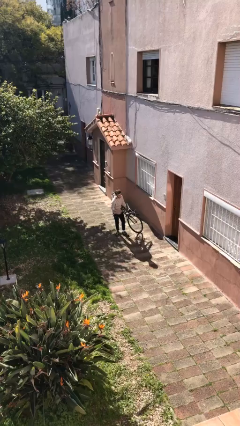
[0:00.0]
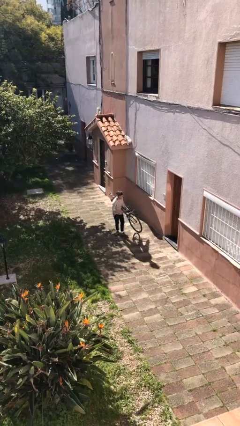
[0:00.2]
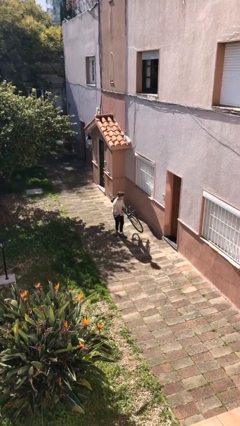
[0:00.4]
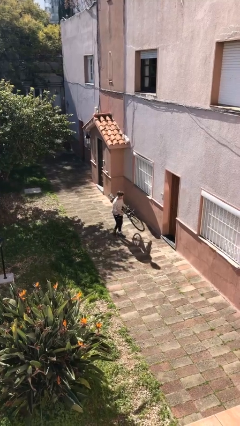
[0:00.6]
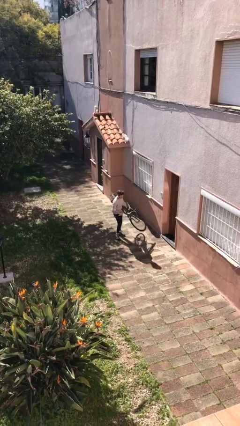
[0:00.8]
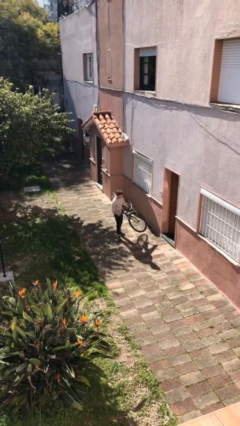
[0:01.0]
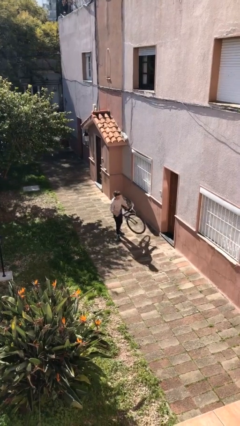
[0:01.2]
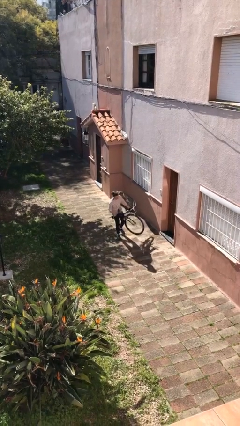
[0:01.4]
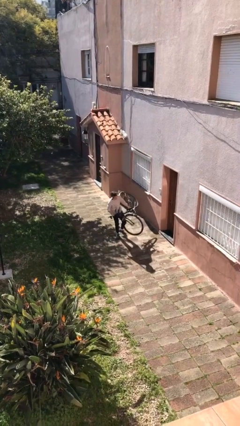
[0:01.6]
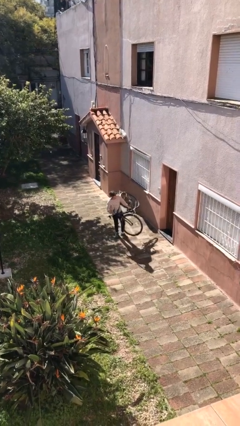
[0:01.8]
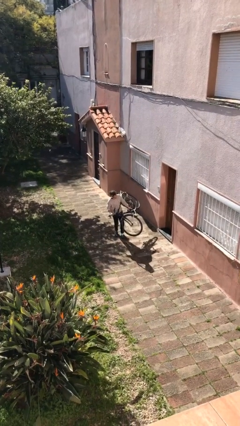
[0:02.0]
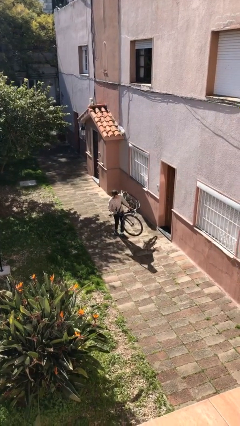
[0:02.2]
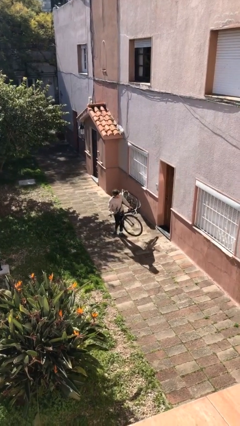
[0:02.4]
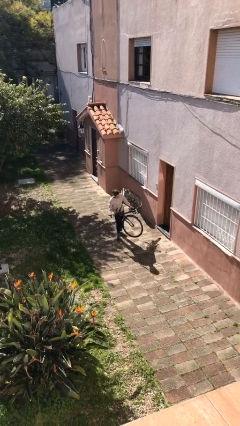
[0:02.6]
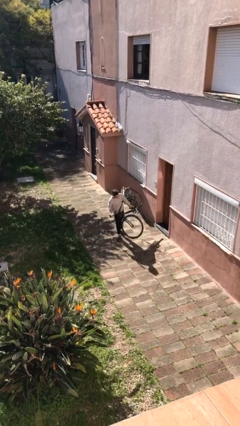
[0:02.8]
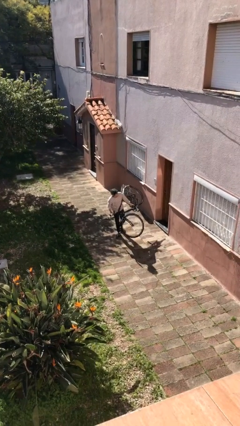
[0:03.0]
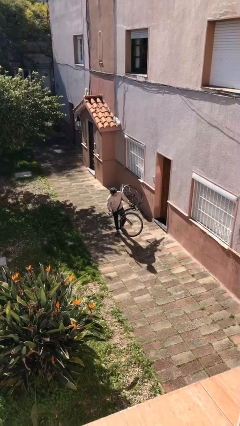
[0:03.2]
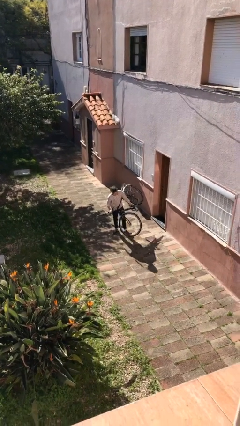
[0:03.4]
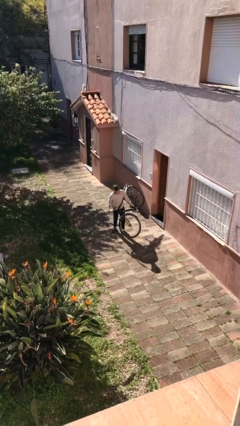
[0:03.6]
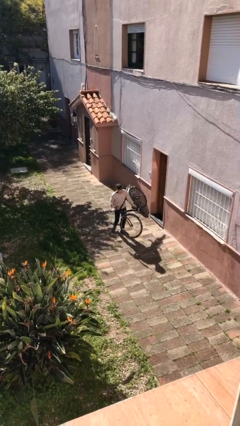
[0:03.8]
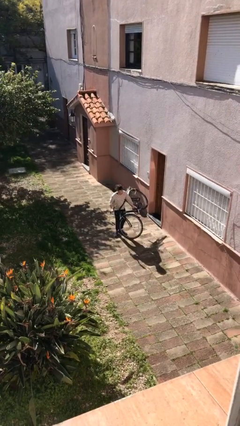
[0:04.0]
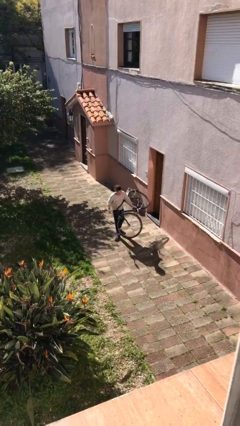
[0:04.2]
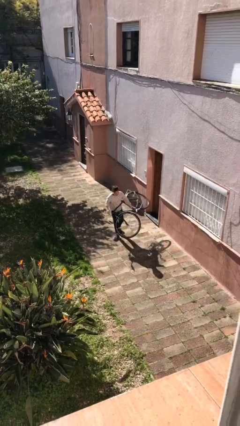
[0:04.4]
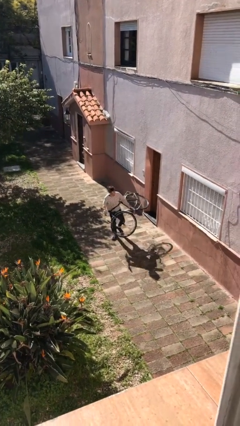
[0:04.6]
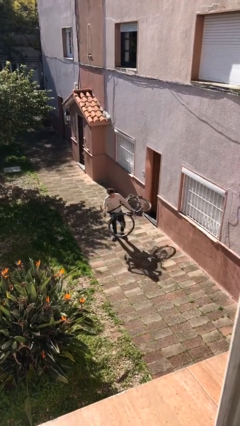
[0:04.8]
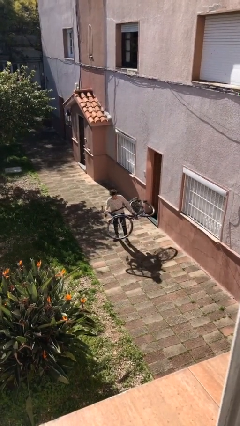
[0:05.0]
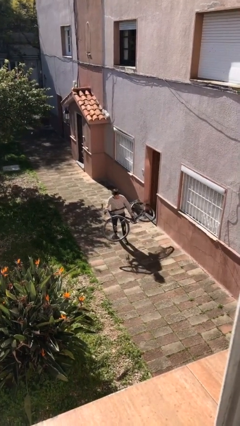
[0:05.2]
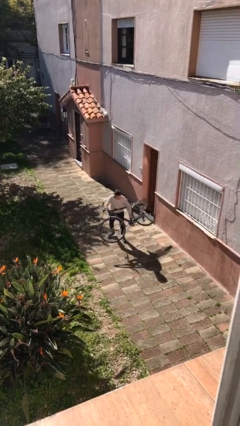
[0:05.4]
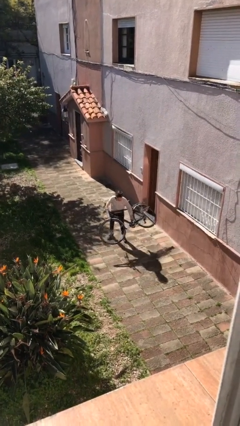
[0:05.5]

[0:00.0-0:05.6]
person carries heavy object

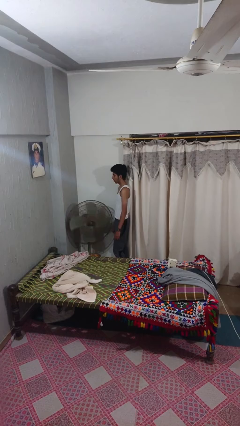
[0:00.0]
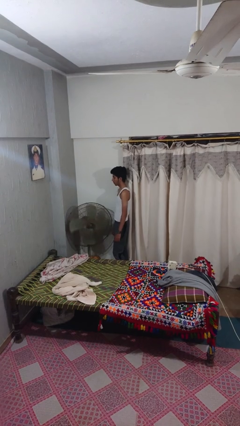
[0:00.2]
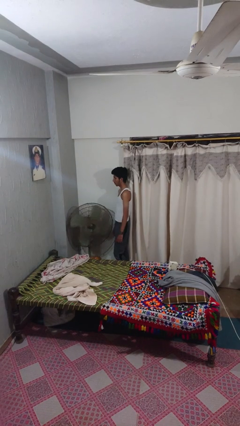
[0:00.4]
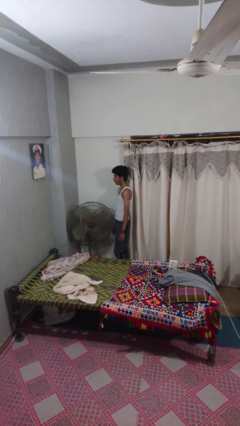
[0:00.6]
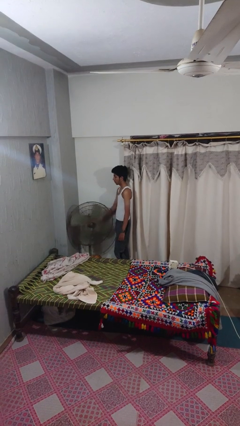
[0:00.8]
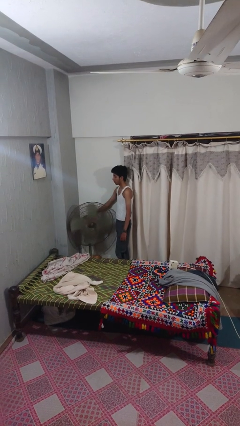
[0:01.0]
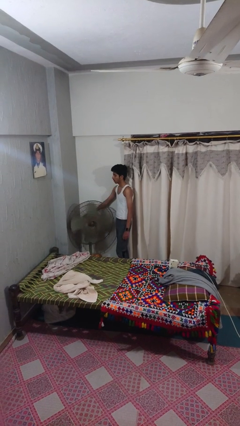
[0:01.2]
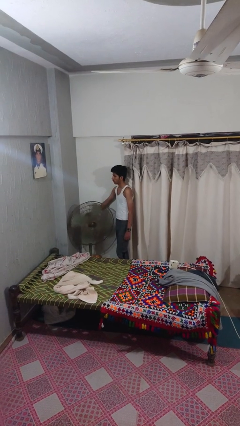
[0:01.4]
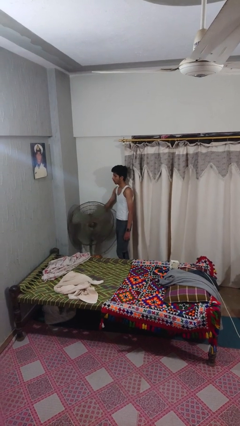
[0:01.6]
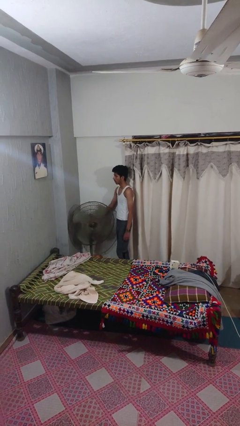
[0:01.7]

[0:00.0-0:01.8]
person turns off fan

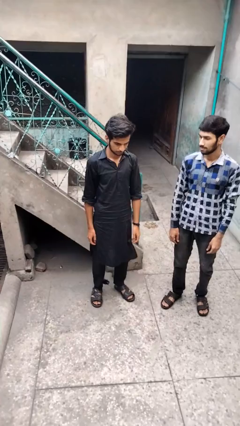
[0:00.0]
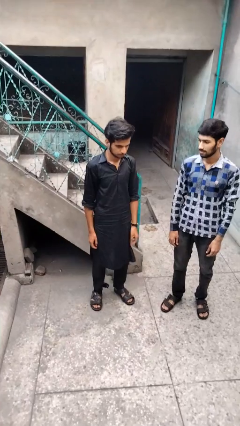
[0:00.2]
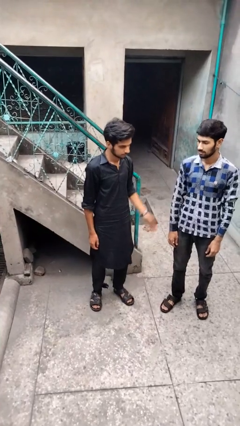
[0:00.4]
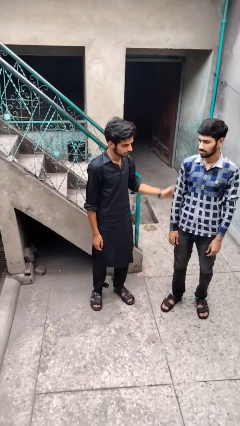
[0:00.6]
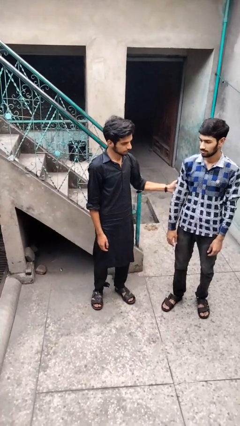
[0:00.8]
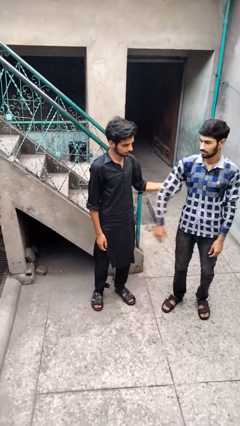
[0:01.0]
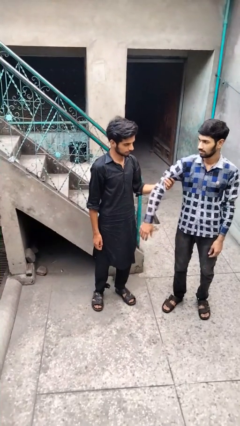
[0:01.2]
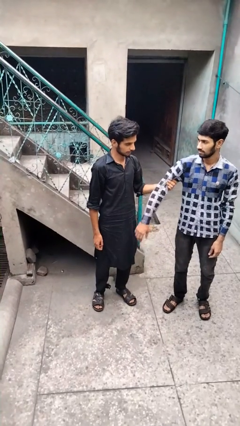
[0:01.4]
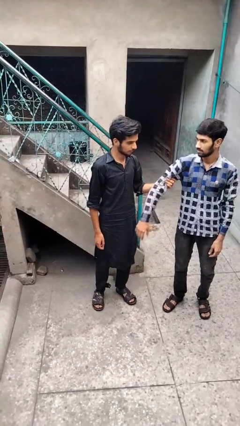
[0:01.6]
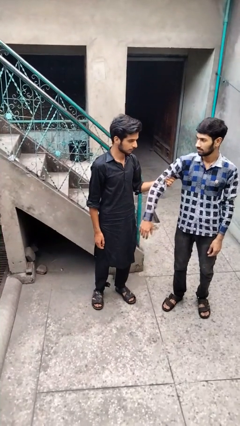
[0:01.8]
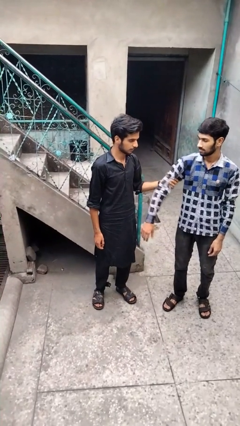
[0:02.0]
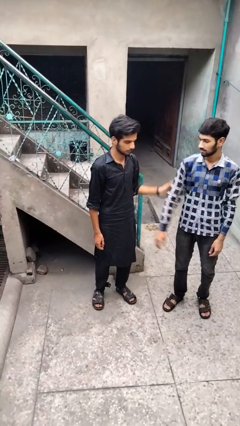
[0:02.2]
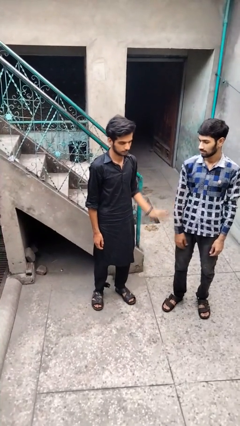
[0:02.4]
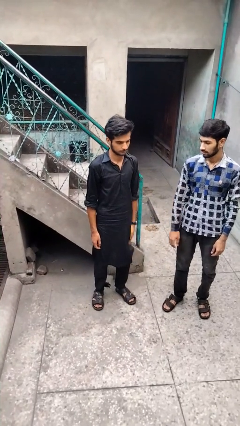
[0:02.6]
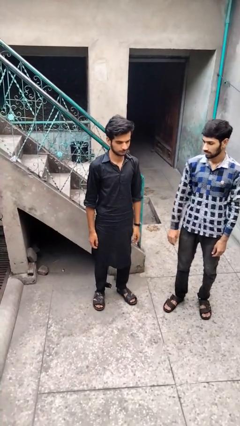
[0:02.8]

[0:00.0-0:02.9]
person grabs person by bicep

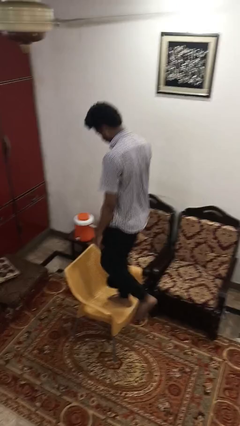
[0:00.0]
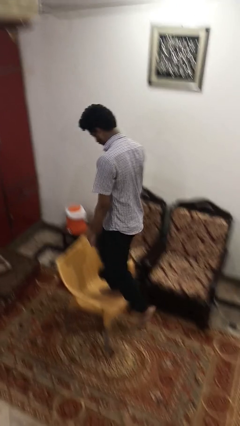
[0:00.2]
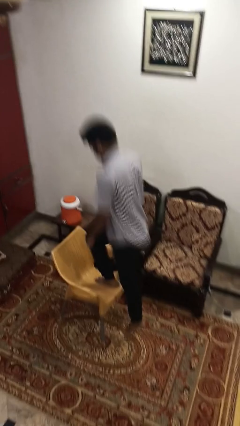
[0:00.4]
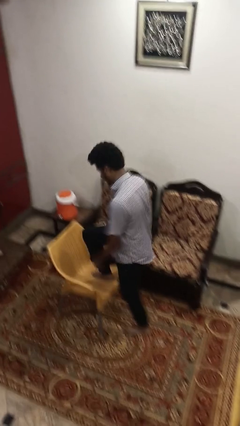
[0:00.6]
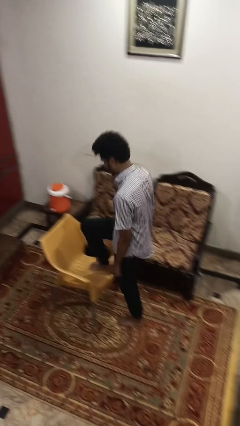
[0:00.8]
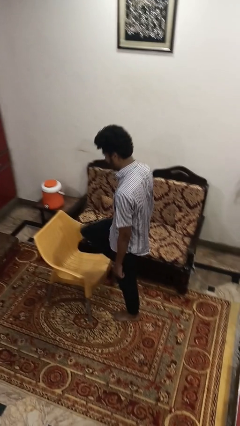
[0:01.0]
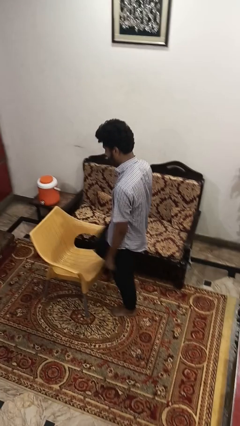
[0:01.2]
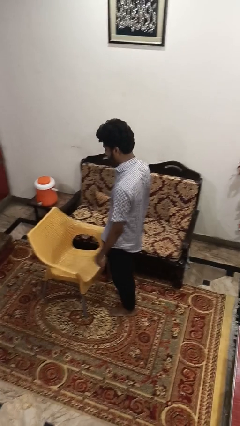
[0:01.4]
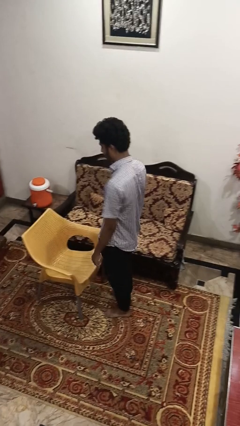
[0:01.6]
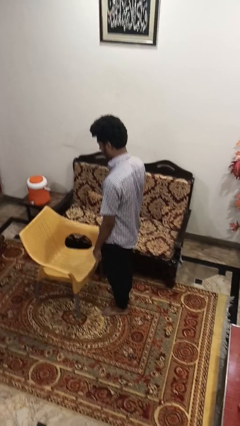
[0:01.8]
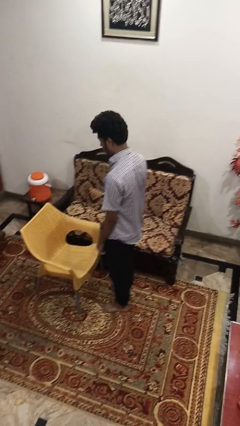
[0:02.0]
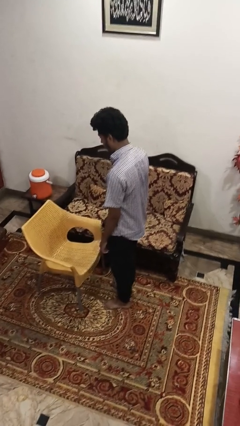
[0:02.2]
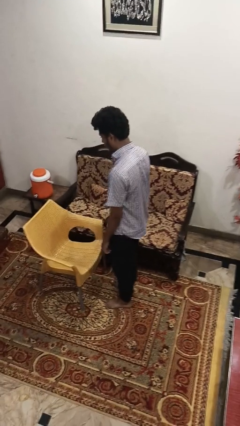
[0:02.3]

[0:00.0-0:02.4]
person climbs off chair

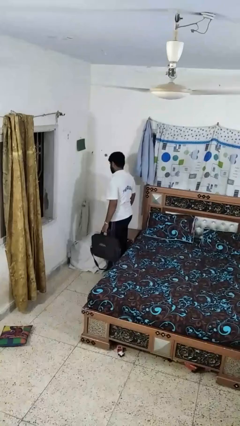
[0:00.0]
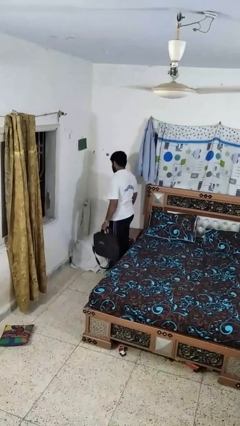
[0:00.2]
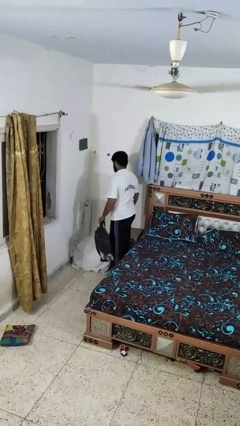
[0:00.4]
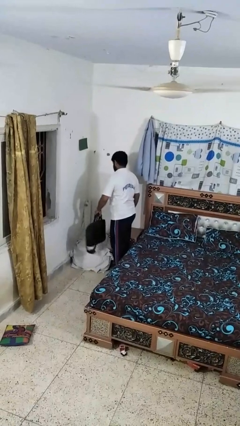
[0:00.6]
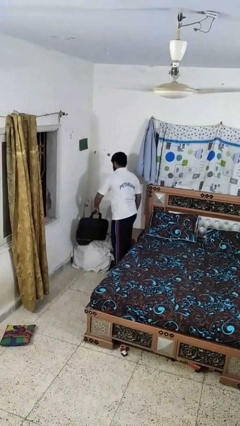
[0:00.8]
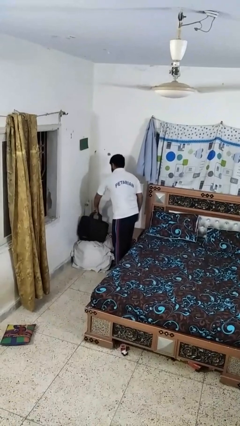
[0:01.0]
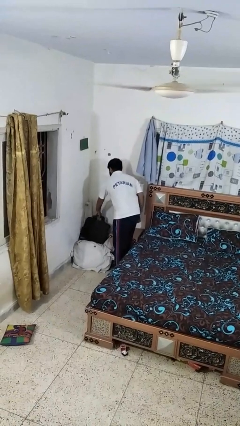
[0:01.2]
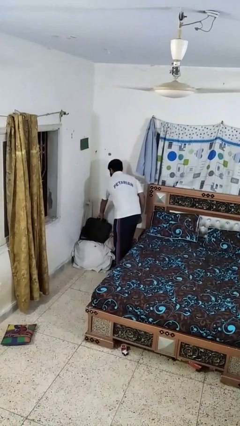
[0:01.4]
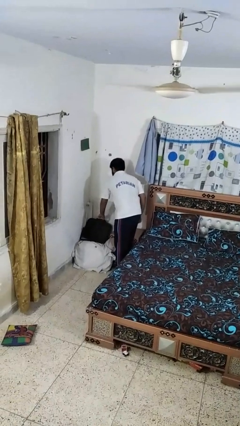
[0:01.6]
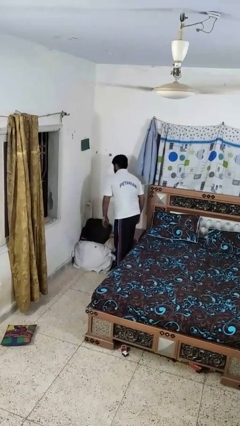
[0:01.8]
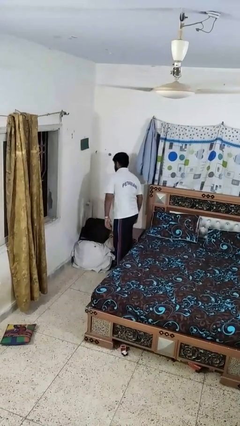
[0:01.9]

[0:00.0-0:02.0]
person puts down object on couch

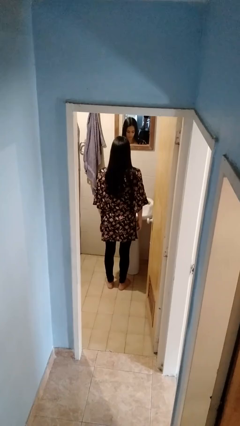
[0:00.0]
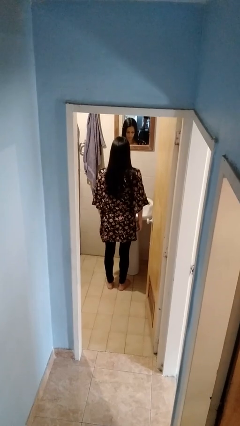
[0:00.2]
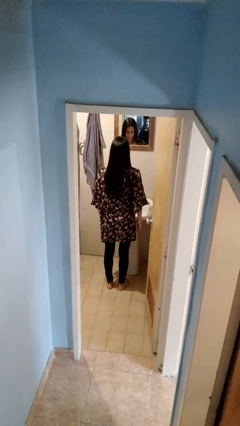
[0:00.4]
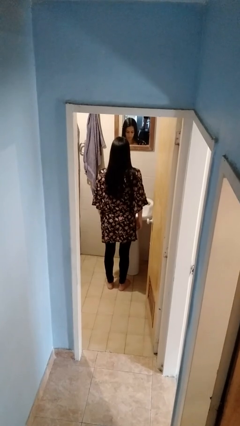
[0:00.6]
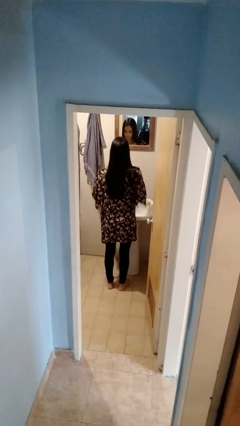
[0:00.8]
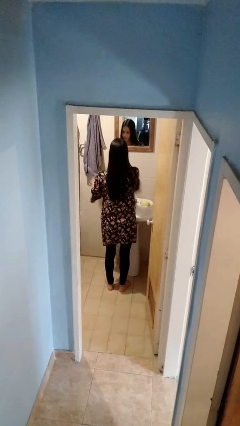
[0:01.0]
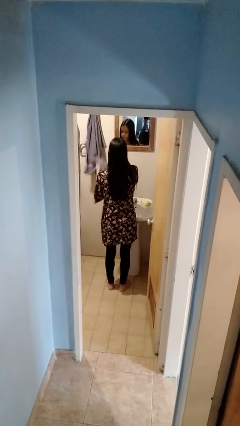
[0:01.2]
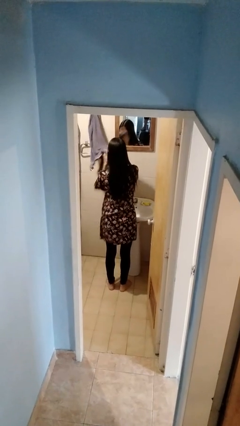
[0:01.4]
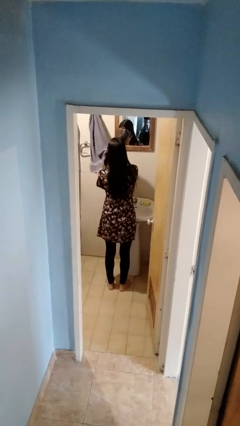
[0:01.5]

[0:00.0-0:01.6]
person dries face with towel

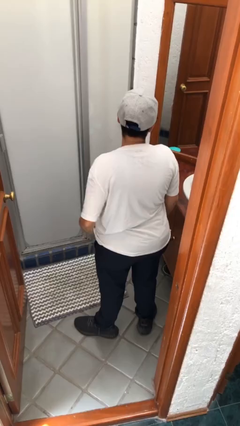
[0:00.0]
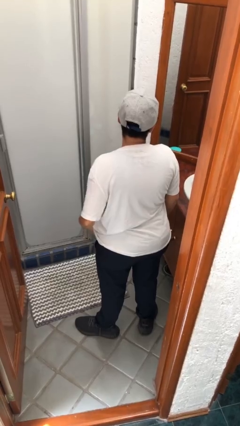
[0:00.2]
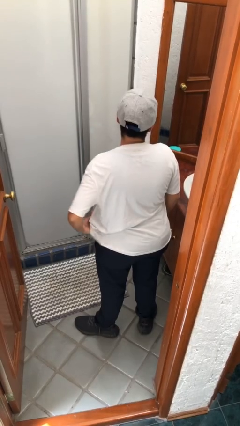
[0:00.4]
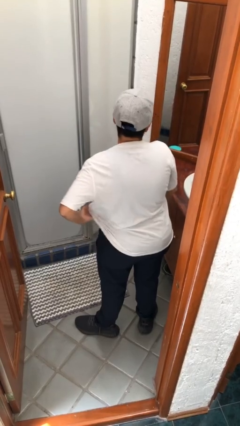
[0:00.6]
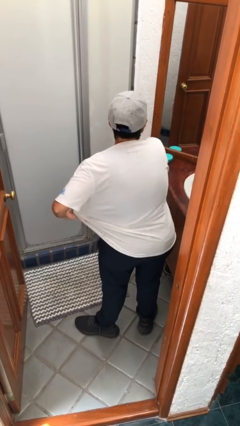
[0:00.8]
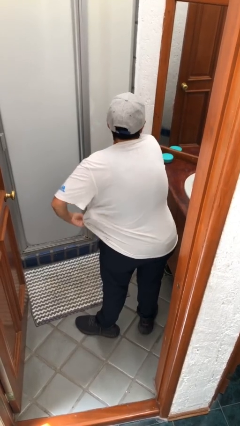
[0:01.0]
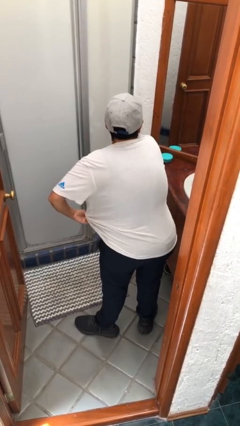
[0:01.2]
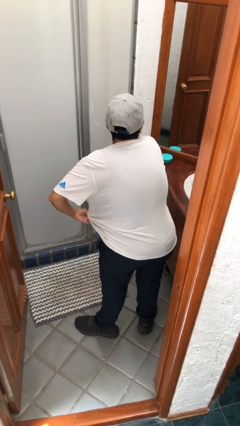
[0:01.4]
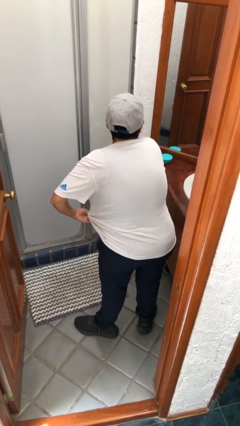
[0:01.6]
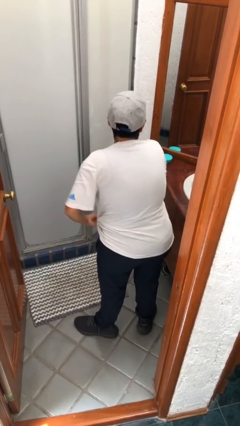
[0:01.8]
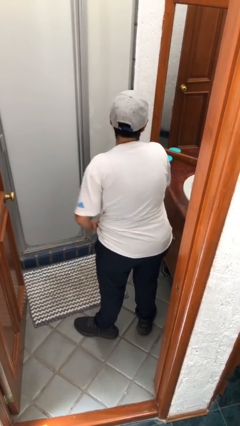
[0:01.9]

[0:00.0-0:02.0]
person applies deodorant
